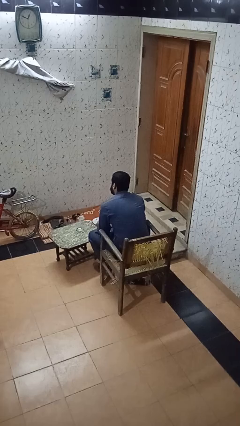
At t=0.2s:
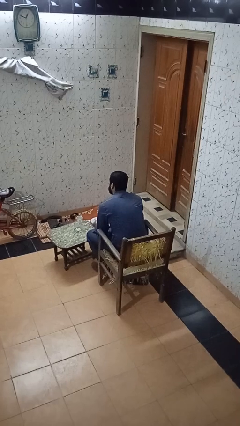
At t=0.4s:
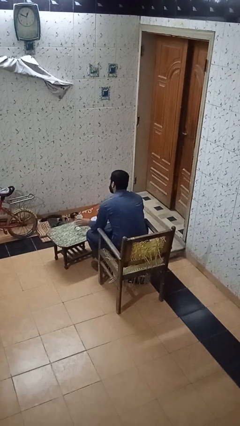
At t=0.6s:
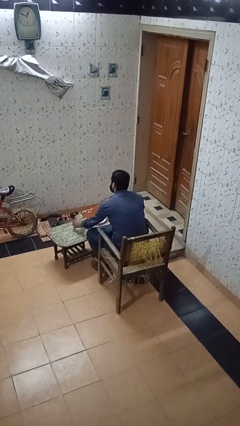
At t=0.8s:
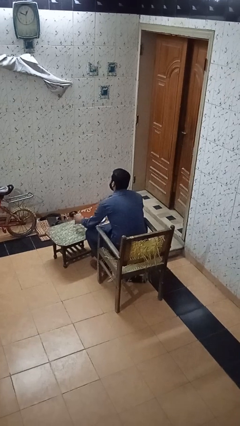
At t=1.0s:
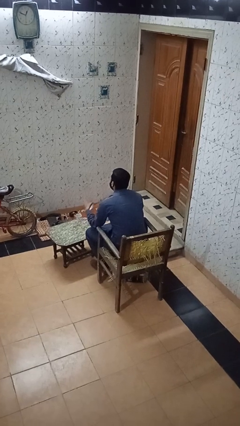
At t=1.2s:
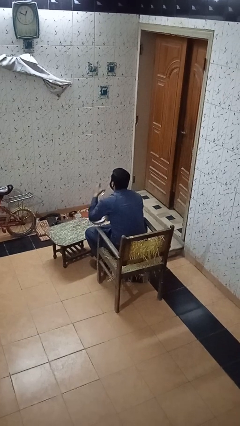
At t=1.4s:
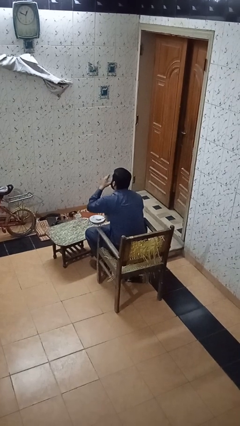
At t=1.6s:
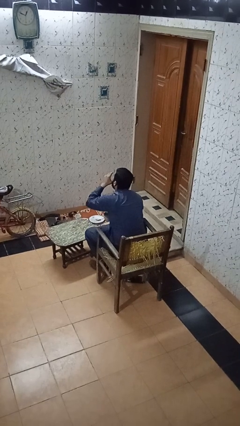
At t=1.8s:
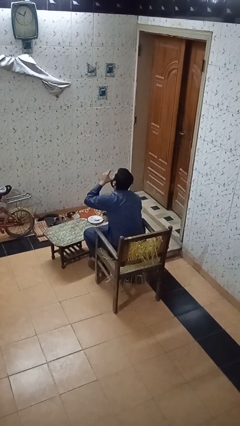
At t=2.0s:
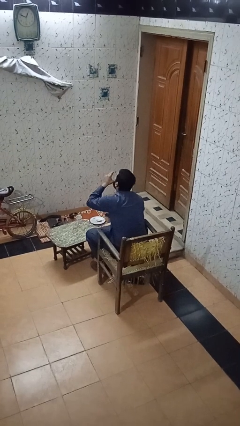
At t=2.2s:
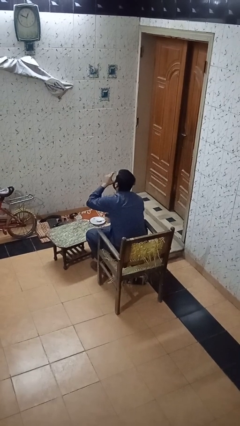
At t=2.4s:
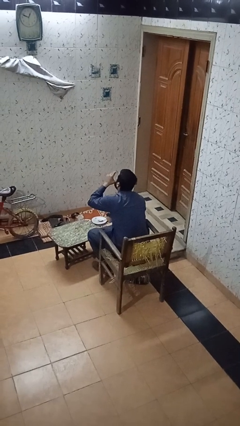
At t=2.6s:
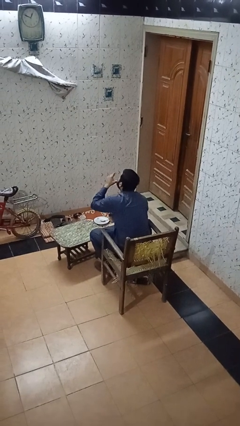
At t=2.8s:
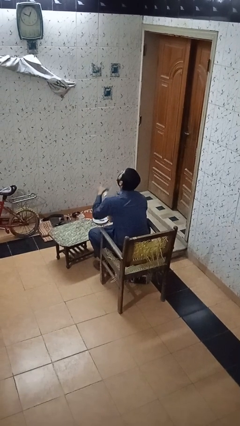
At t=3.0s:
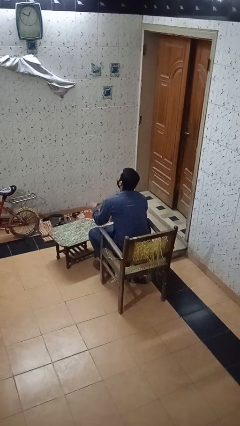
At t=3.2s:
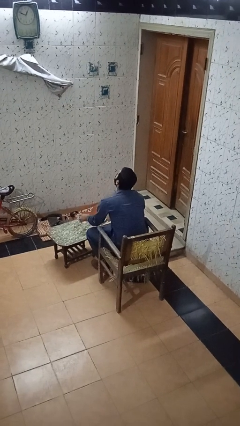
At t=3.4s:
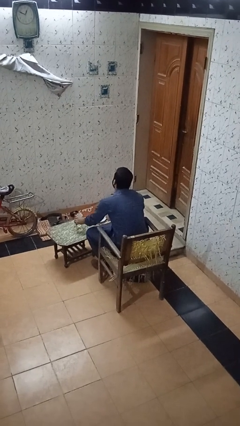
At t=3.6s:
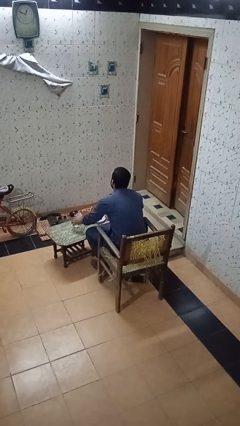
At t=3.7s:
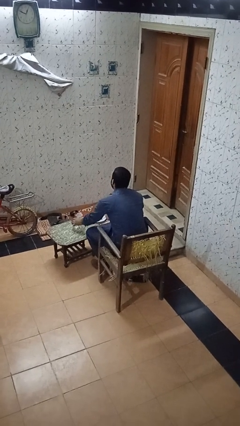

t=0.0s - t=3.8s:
person drinks from cup

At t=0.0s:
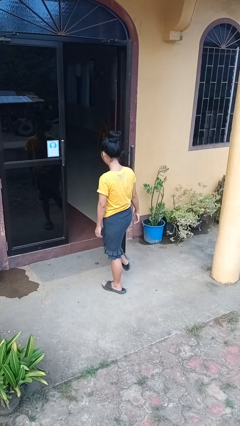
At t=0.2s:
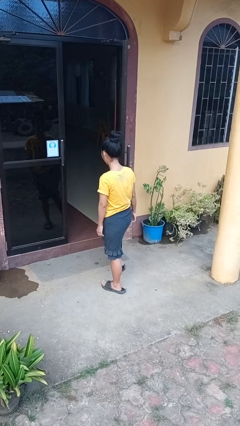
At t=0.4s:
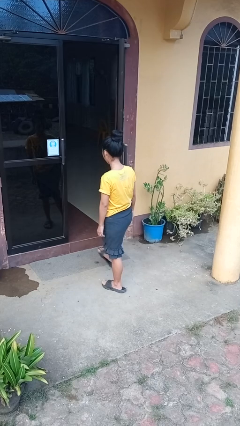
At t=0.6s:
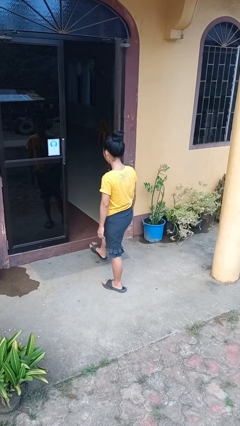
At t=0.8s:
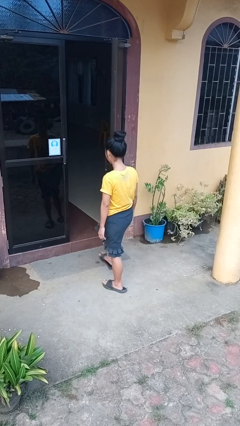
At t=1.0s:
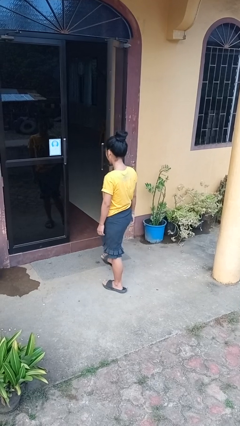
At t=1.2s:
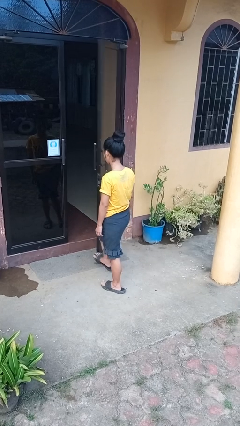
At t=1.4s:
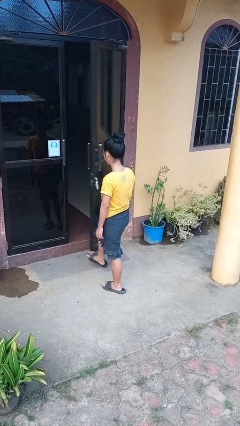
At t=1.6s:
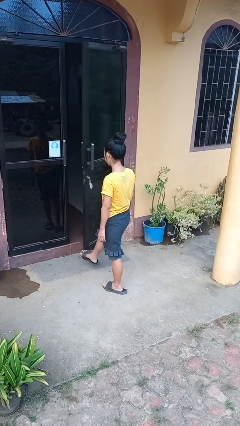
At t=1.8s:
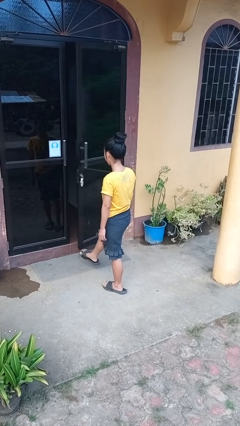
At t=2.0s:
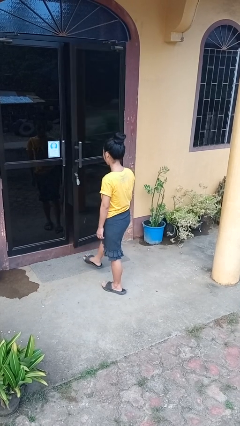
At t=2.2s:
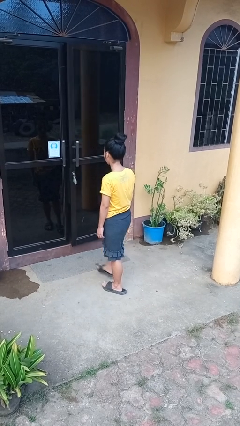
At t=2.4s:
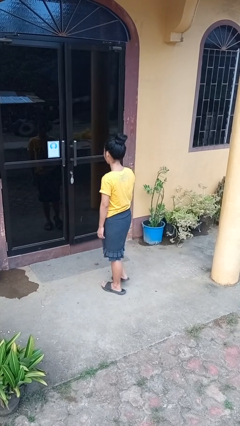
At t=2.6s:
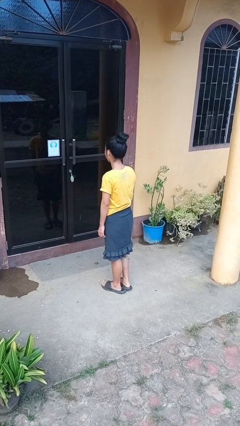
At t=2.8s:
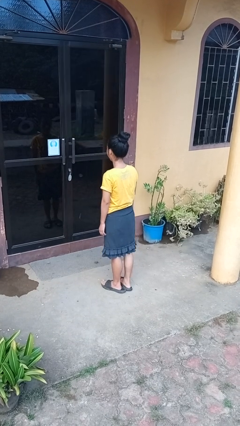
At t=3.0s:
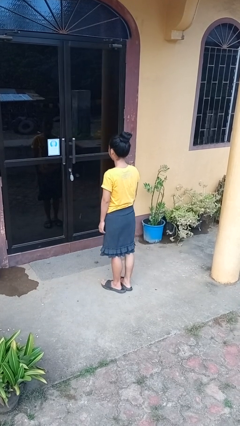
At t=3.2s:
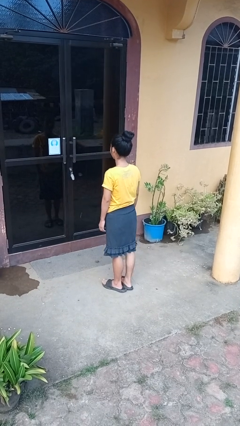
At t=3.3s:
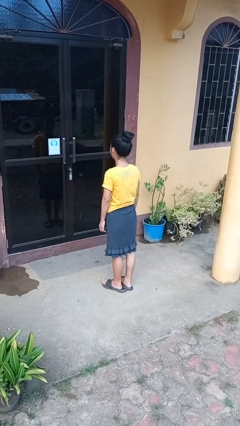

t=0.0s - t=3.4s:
person closes door with foot

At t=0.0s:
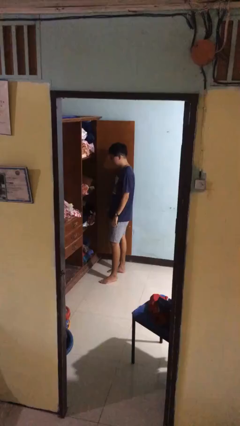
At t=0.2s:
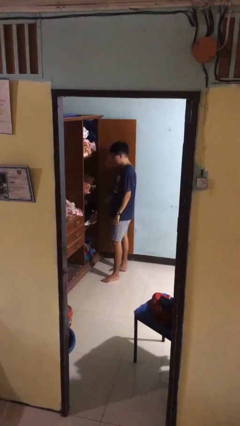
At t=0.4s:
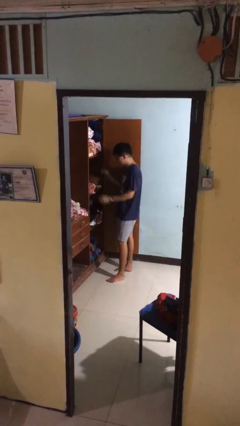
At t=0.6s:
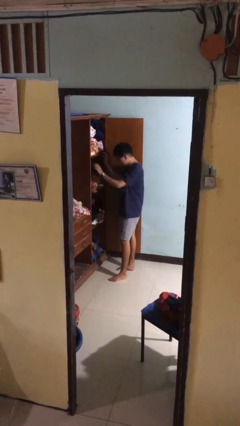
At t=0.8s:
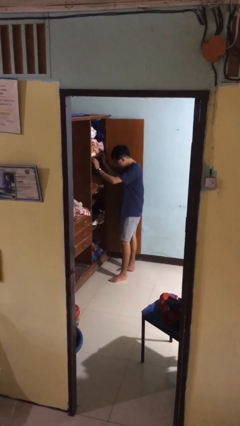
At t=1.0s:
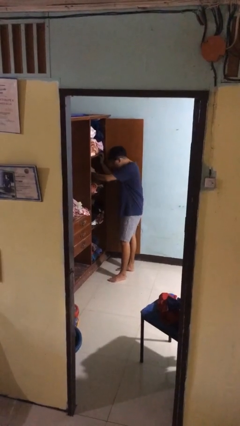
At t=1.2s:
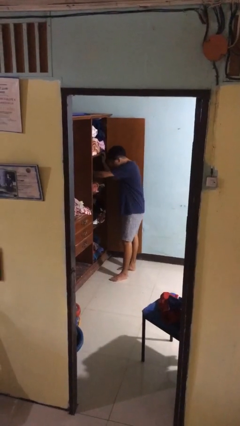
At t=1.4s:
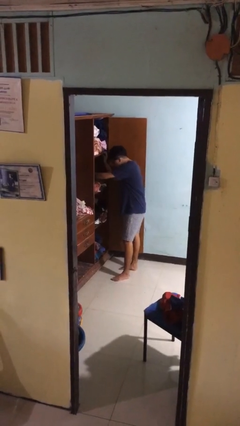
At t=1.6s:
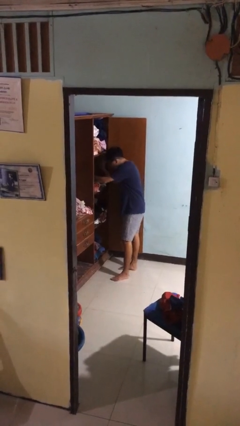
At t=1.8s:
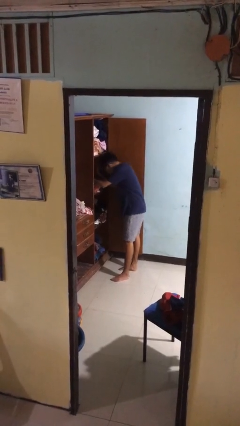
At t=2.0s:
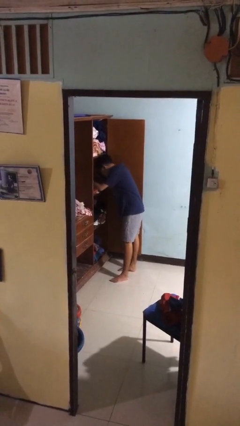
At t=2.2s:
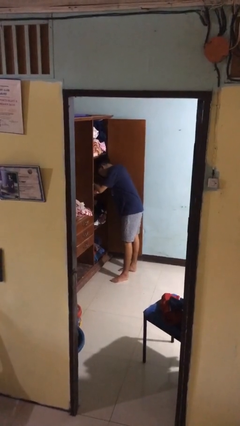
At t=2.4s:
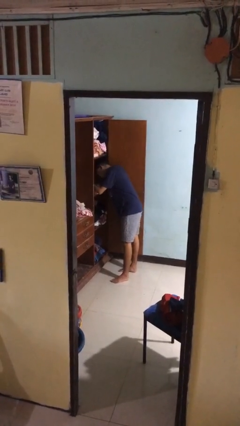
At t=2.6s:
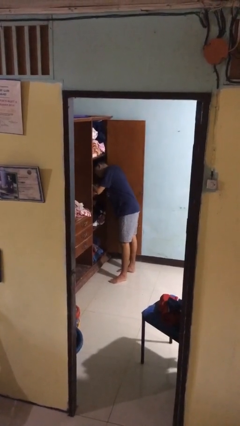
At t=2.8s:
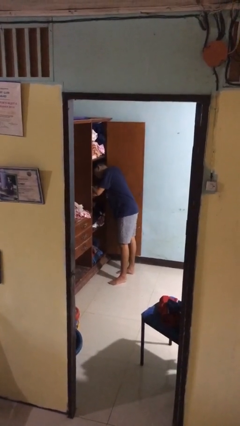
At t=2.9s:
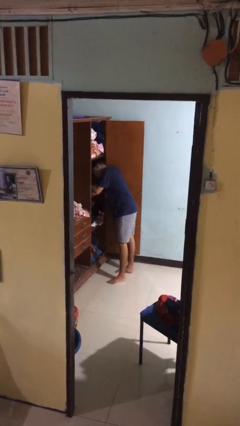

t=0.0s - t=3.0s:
person searches in cabinet

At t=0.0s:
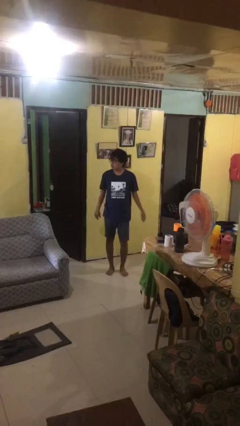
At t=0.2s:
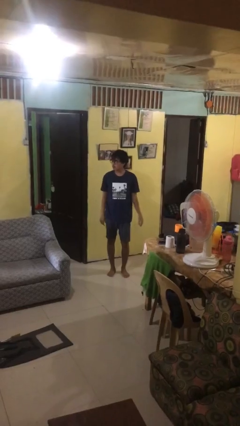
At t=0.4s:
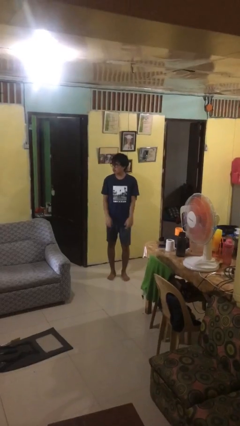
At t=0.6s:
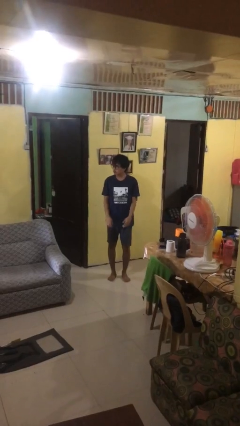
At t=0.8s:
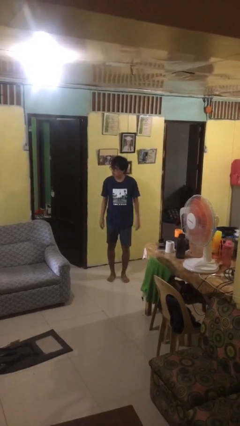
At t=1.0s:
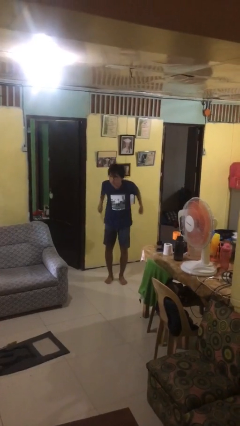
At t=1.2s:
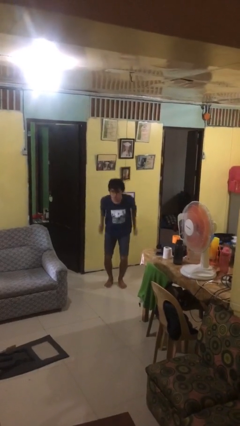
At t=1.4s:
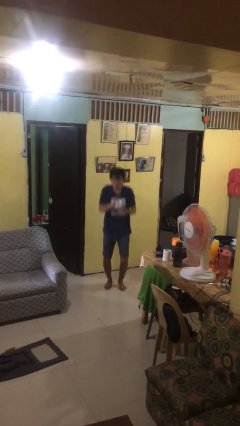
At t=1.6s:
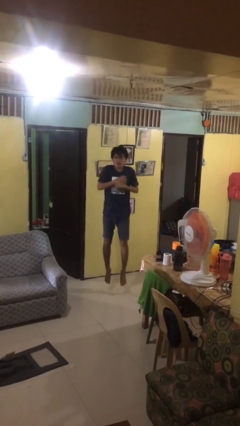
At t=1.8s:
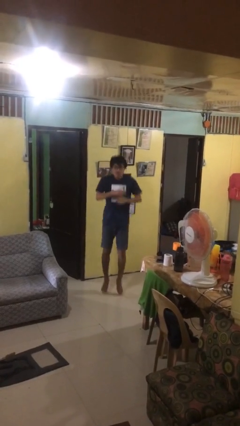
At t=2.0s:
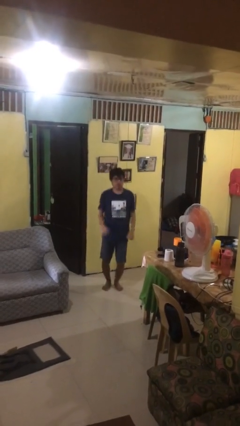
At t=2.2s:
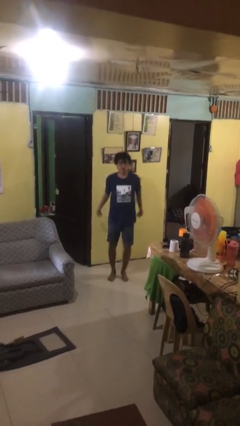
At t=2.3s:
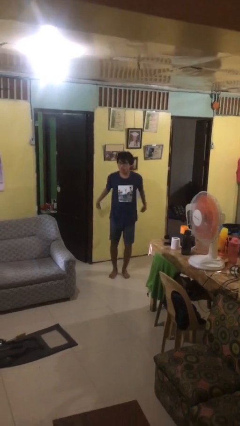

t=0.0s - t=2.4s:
person jumps

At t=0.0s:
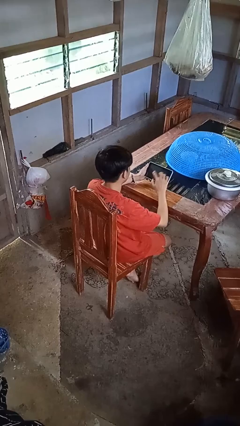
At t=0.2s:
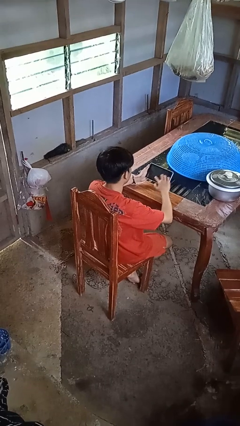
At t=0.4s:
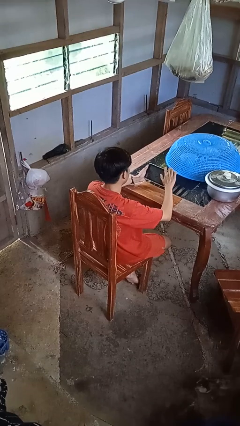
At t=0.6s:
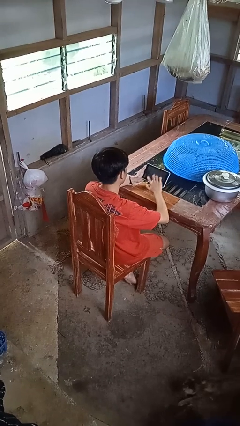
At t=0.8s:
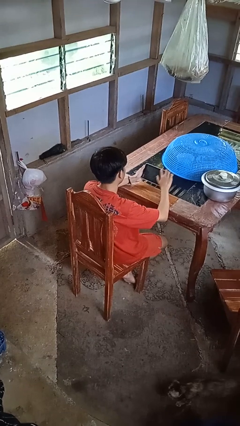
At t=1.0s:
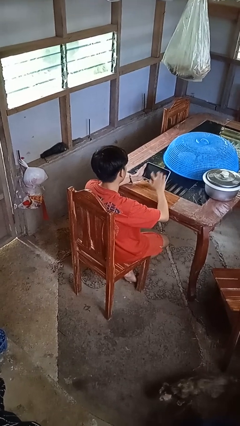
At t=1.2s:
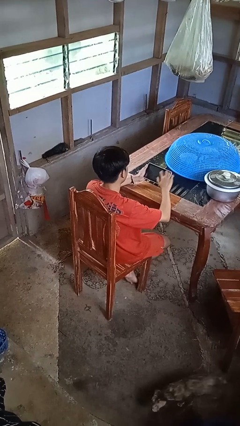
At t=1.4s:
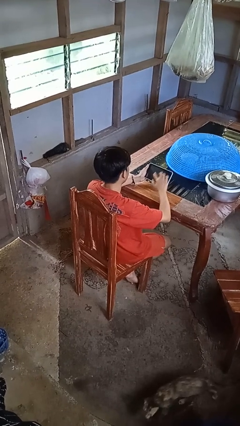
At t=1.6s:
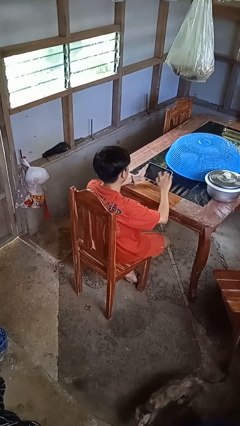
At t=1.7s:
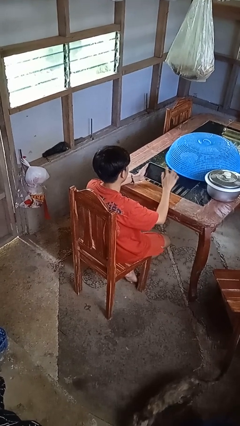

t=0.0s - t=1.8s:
person interacts with tablet

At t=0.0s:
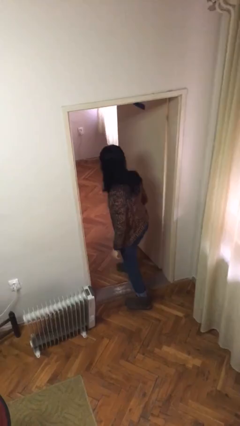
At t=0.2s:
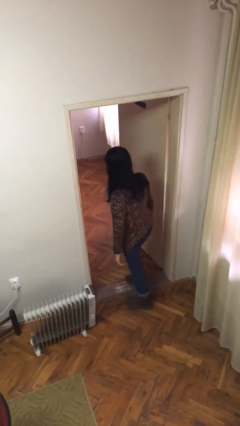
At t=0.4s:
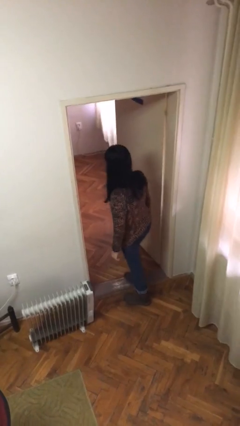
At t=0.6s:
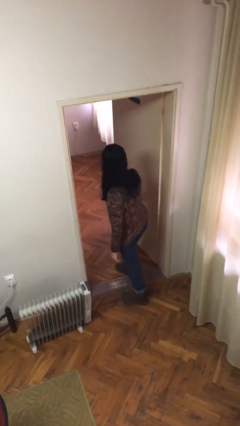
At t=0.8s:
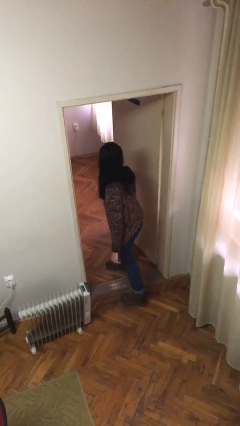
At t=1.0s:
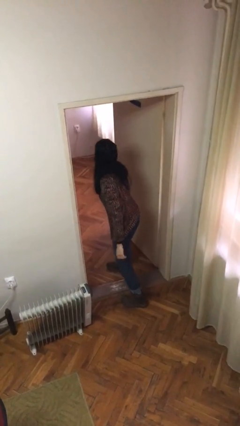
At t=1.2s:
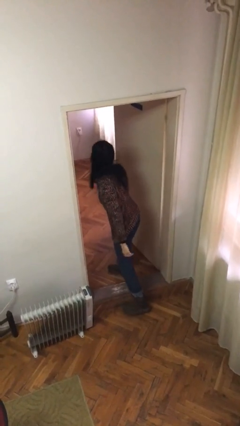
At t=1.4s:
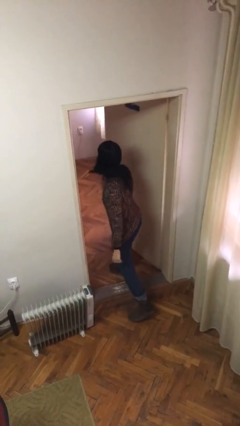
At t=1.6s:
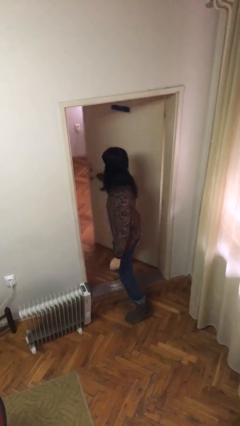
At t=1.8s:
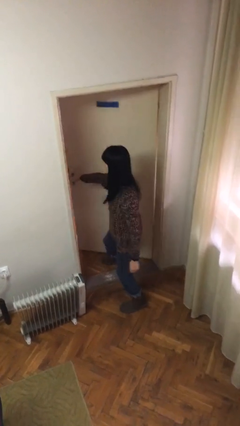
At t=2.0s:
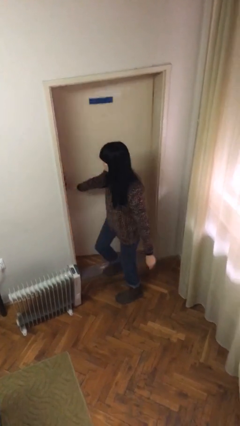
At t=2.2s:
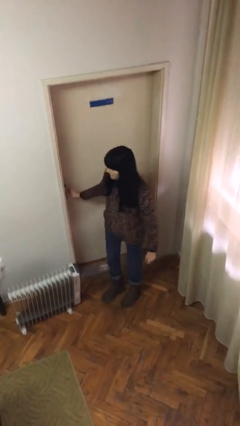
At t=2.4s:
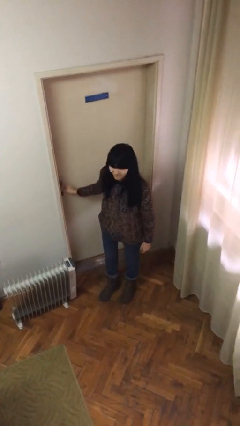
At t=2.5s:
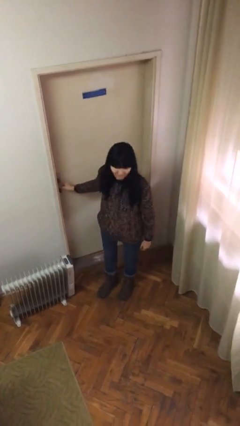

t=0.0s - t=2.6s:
person closes facility door

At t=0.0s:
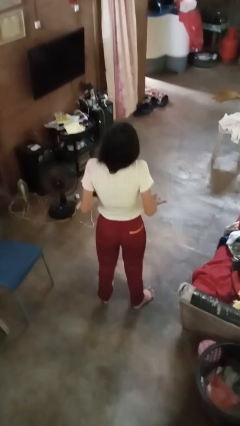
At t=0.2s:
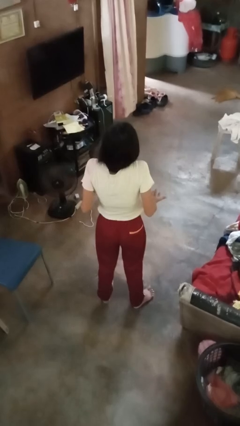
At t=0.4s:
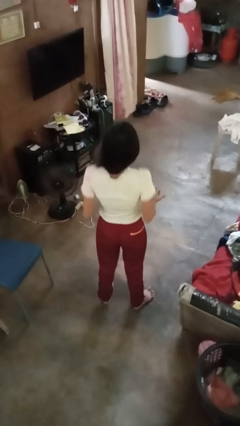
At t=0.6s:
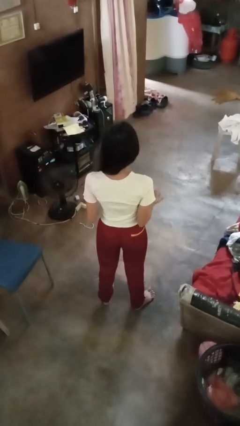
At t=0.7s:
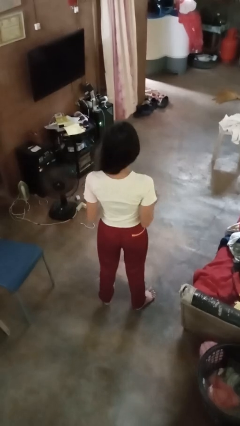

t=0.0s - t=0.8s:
person shrugs
